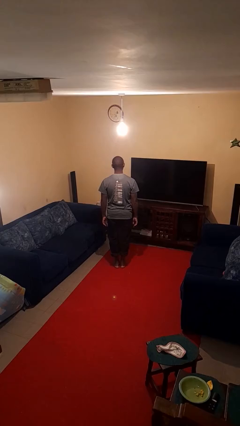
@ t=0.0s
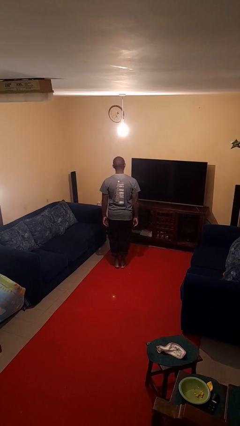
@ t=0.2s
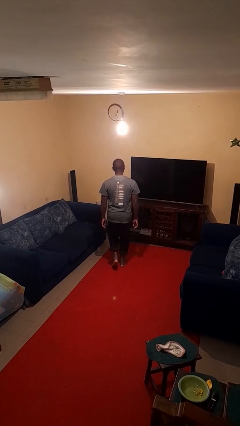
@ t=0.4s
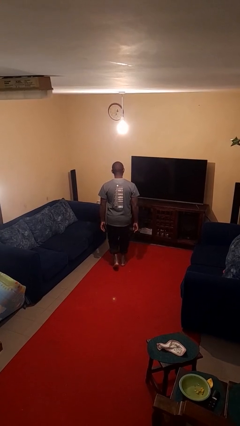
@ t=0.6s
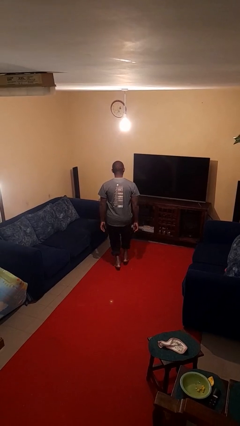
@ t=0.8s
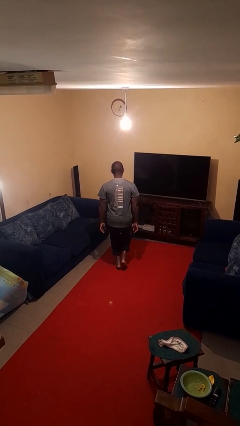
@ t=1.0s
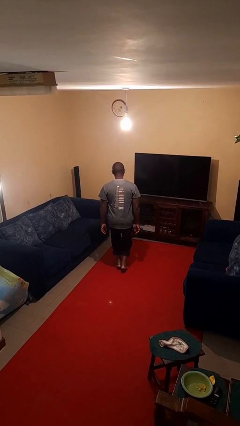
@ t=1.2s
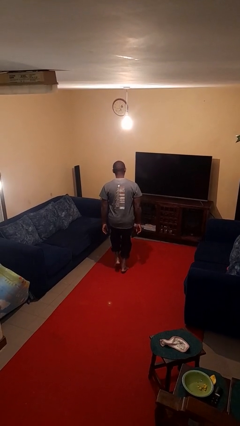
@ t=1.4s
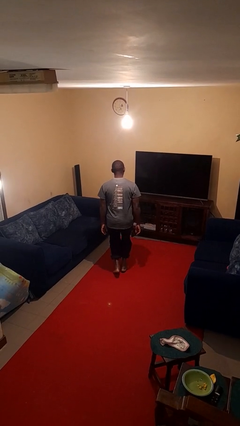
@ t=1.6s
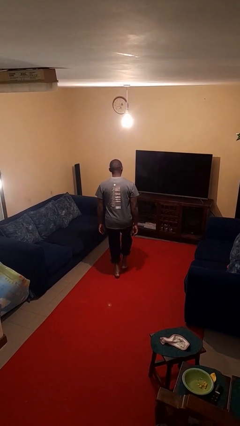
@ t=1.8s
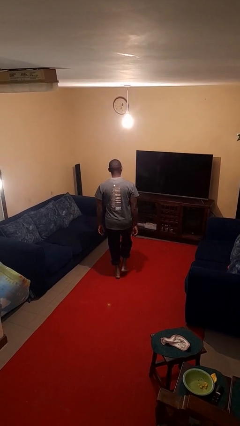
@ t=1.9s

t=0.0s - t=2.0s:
person walks tiptoe

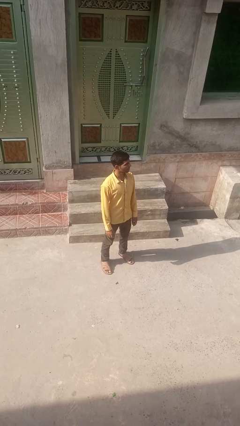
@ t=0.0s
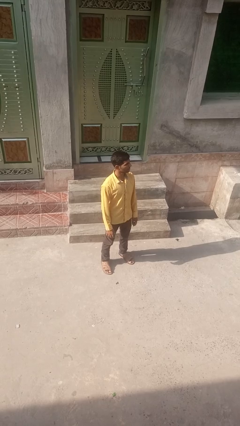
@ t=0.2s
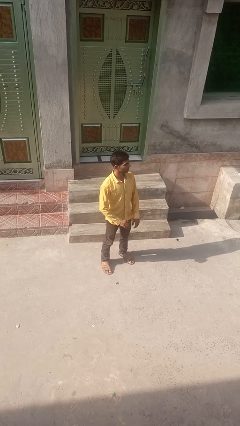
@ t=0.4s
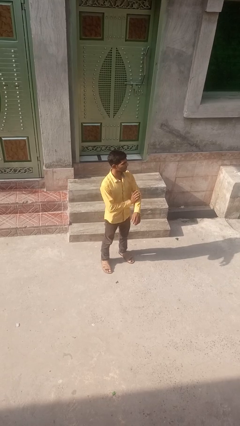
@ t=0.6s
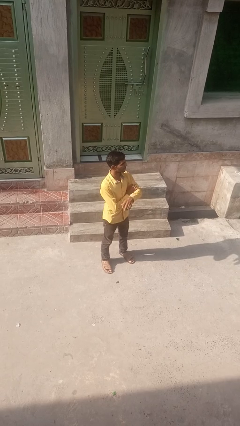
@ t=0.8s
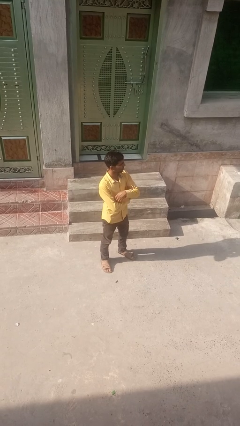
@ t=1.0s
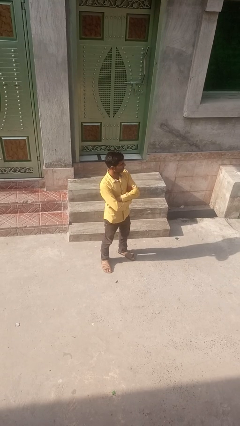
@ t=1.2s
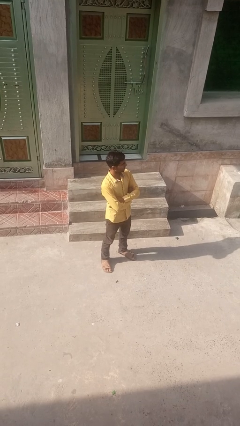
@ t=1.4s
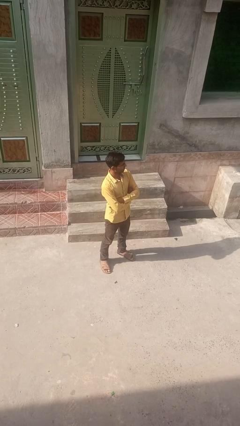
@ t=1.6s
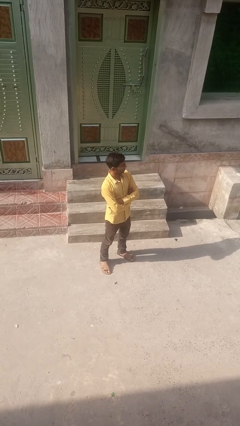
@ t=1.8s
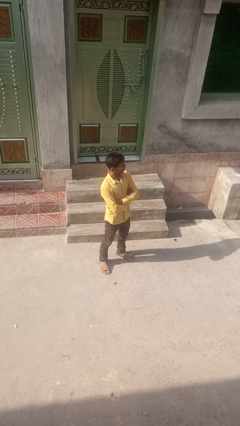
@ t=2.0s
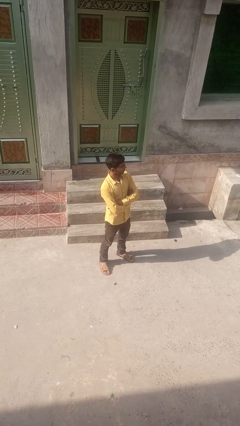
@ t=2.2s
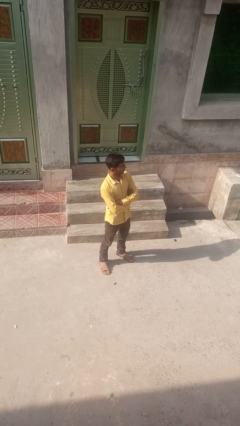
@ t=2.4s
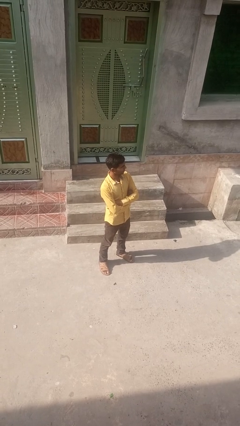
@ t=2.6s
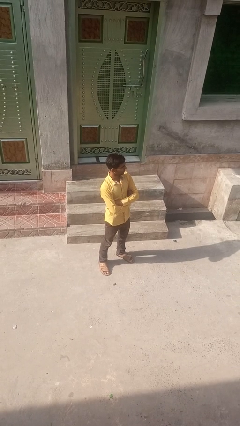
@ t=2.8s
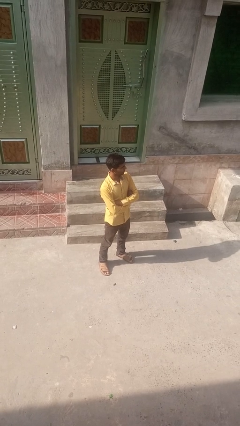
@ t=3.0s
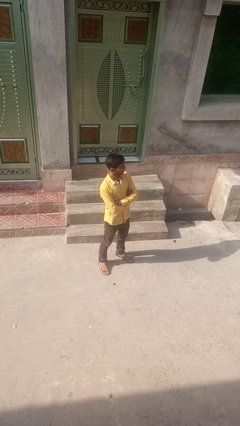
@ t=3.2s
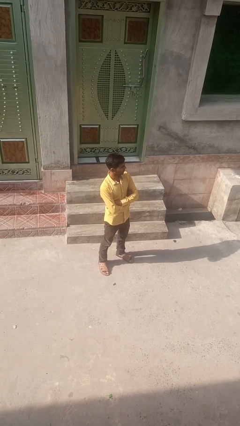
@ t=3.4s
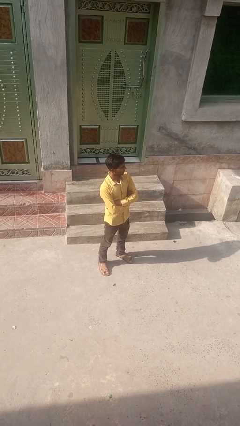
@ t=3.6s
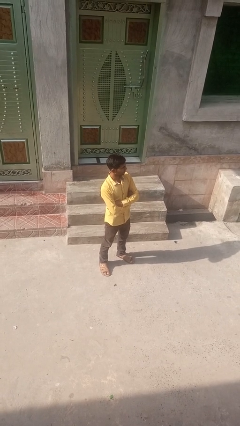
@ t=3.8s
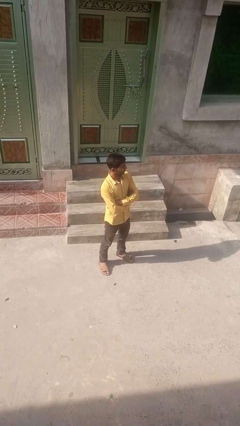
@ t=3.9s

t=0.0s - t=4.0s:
person crosses arms

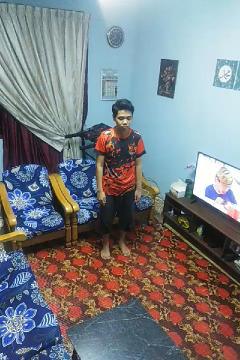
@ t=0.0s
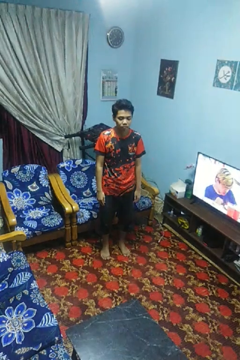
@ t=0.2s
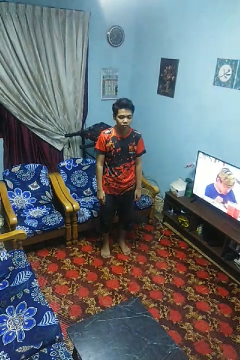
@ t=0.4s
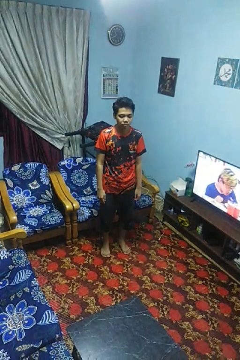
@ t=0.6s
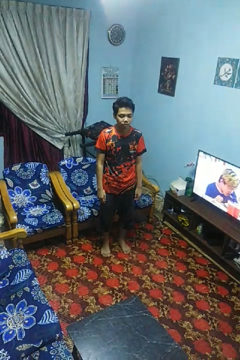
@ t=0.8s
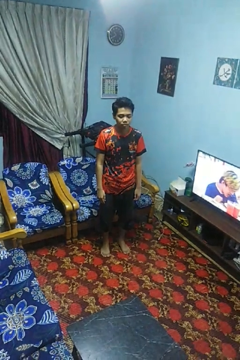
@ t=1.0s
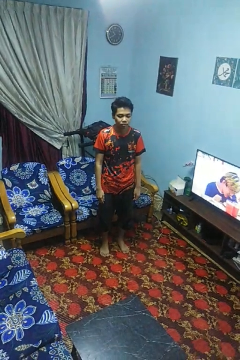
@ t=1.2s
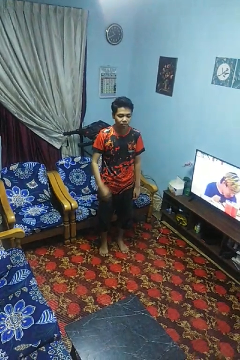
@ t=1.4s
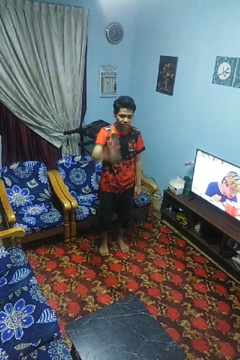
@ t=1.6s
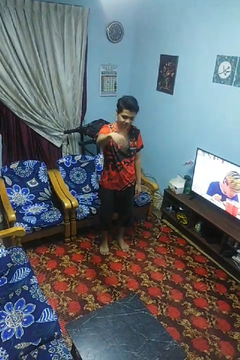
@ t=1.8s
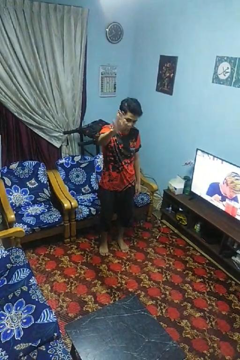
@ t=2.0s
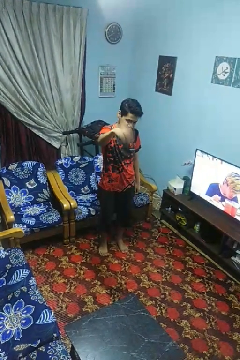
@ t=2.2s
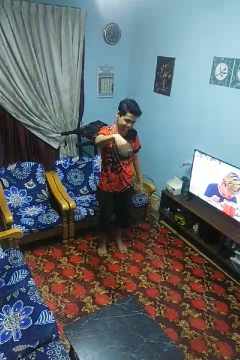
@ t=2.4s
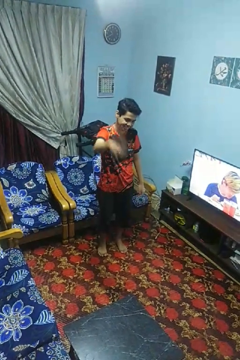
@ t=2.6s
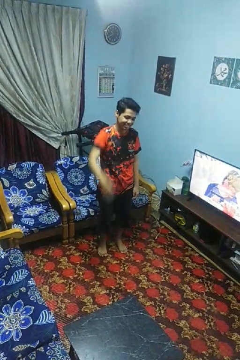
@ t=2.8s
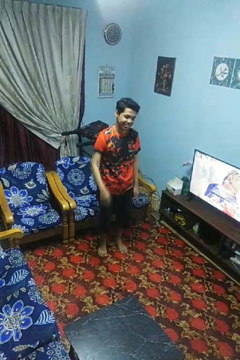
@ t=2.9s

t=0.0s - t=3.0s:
person gestures come here

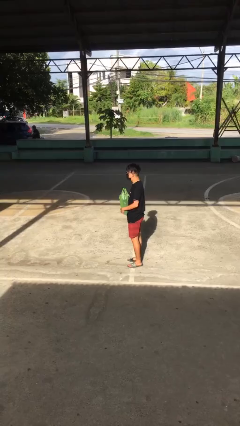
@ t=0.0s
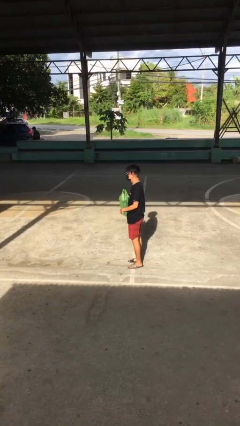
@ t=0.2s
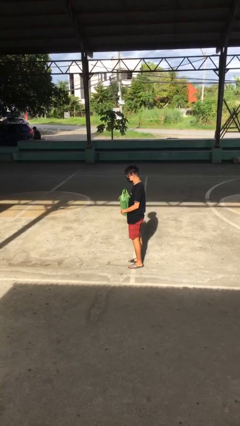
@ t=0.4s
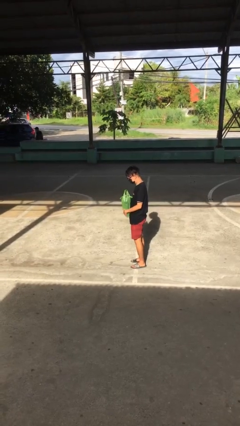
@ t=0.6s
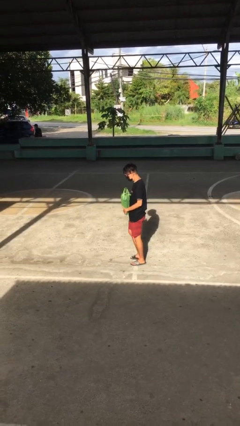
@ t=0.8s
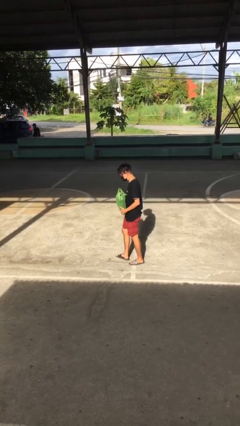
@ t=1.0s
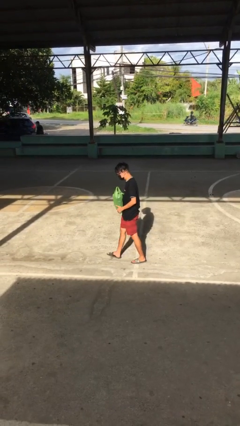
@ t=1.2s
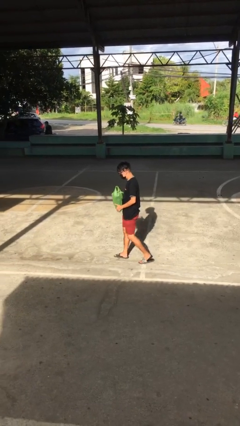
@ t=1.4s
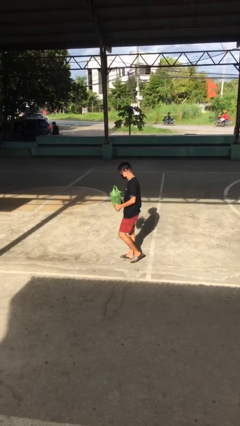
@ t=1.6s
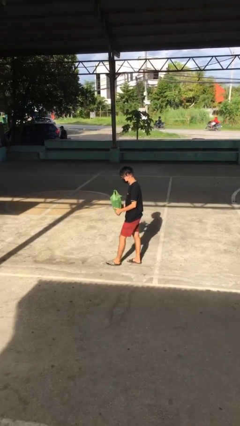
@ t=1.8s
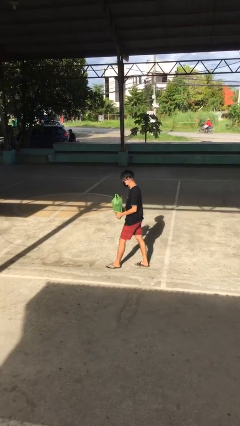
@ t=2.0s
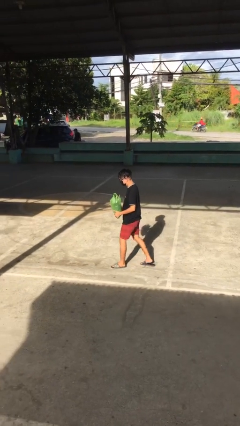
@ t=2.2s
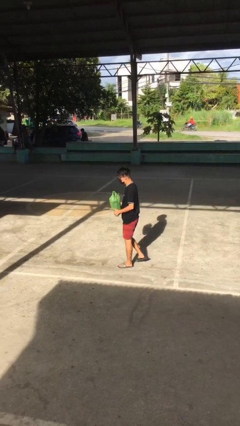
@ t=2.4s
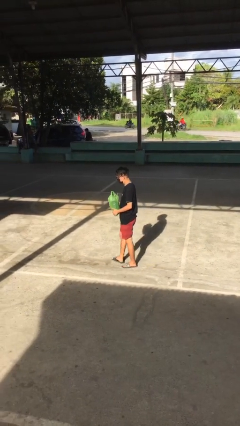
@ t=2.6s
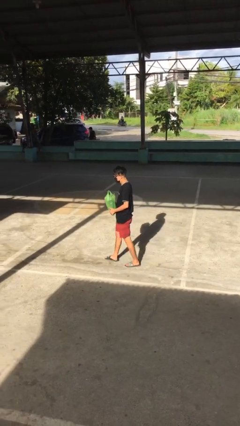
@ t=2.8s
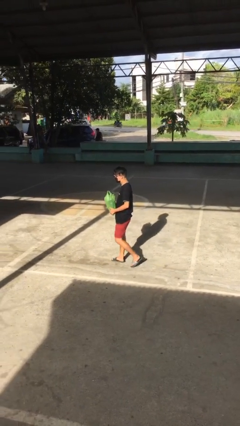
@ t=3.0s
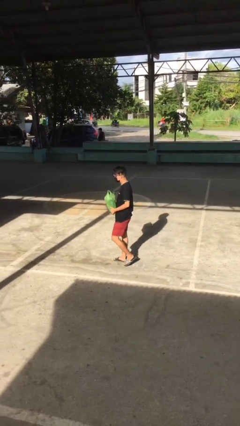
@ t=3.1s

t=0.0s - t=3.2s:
person carries groceries

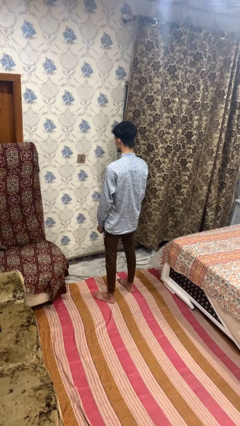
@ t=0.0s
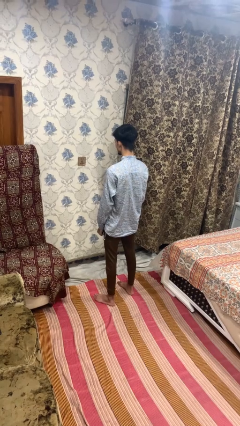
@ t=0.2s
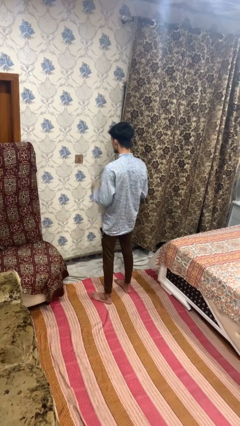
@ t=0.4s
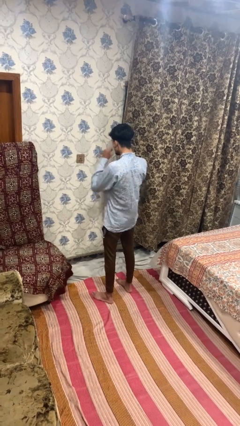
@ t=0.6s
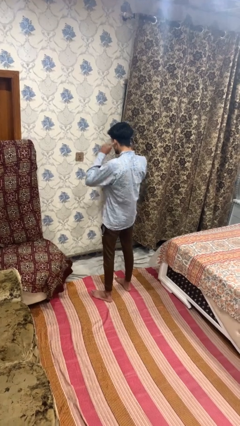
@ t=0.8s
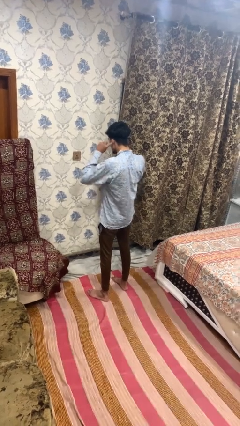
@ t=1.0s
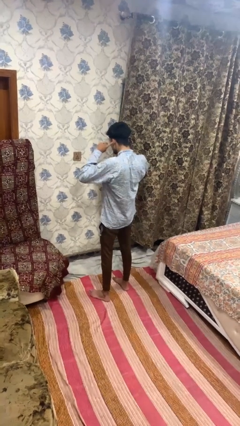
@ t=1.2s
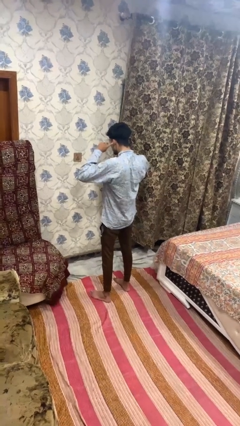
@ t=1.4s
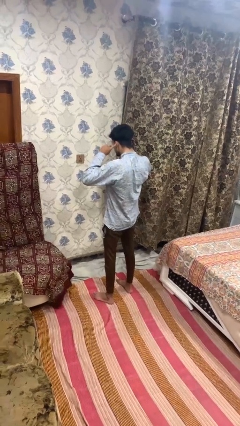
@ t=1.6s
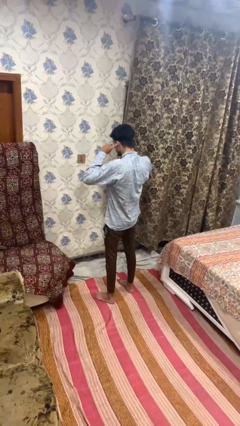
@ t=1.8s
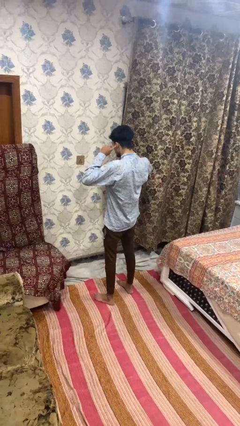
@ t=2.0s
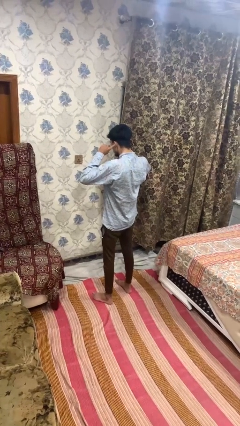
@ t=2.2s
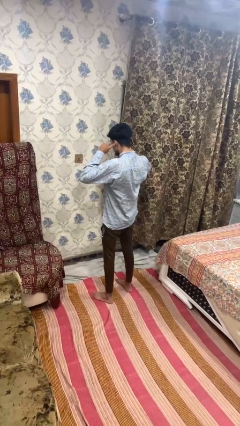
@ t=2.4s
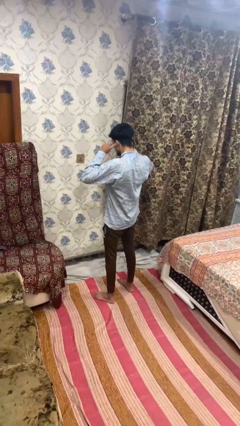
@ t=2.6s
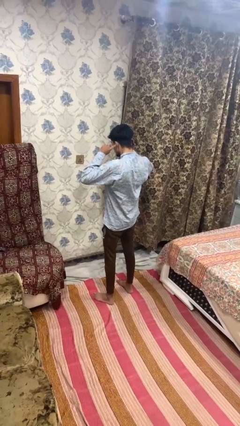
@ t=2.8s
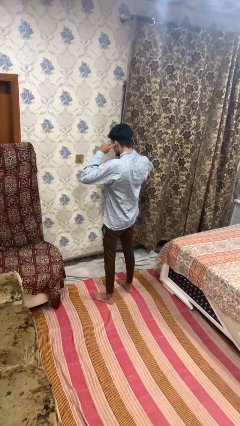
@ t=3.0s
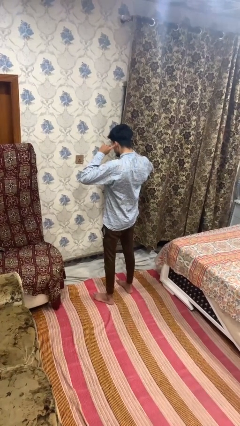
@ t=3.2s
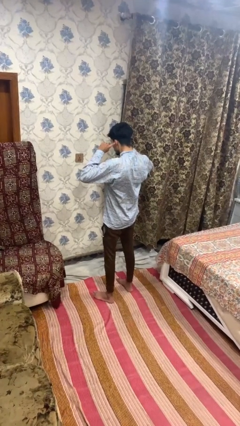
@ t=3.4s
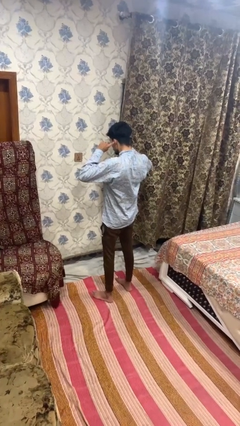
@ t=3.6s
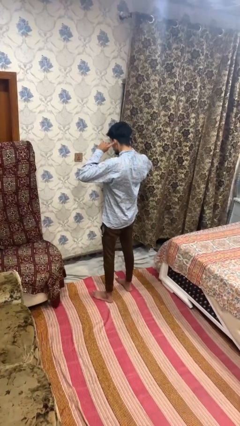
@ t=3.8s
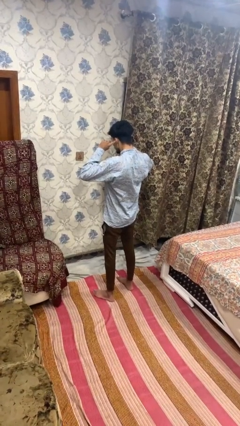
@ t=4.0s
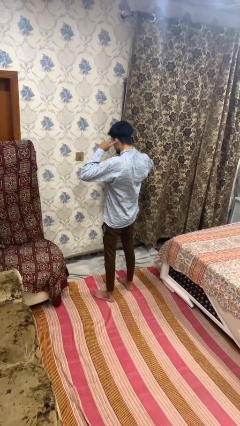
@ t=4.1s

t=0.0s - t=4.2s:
person puts fingers in ear

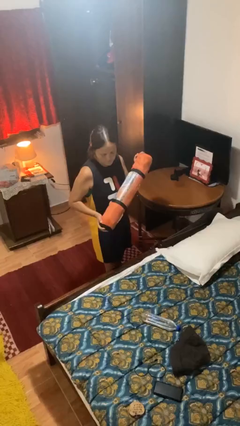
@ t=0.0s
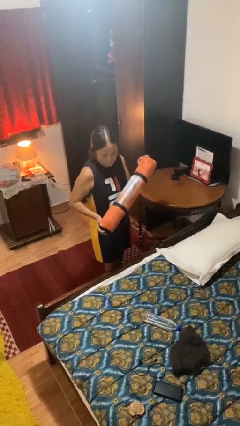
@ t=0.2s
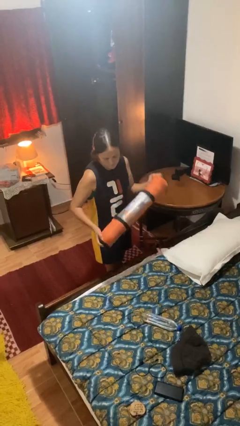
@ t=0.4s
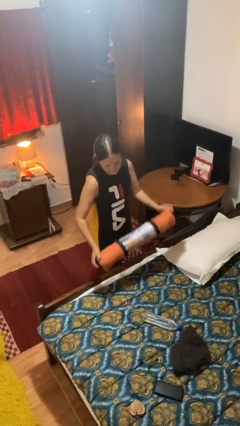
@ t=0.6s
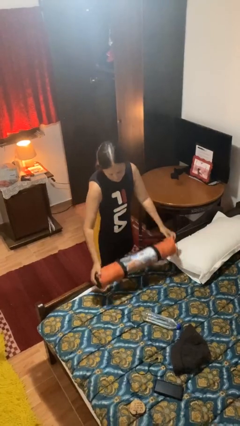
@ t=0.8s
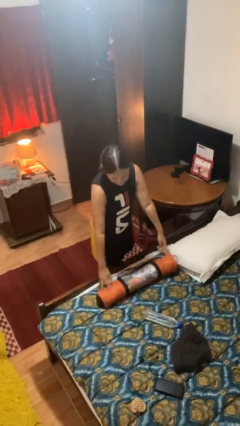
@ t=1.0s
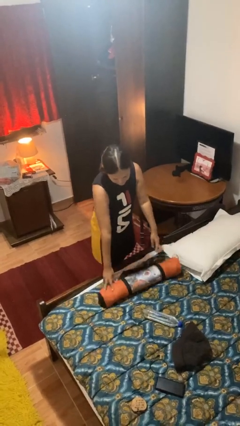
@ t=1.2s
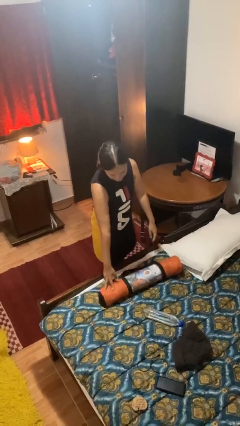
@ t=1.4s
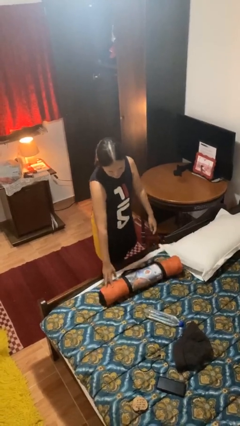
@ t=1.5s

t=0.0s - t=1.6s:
person puts down object on bed
